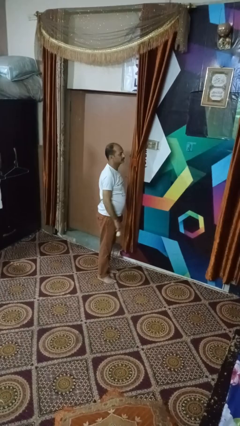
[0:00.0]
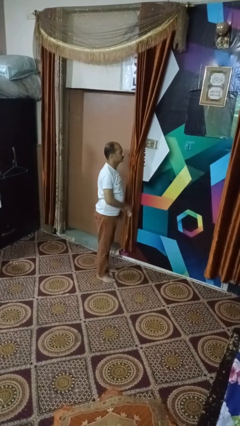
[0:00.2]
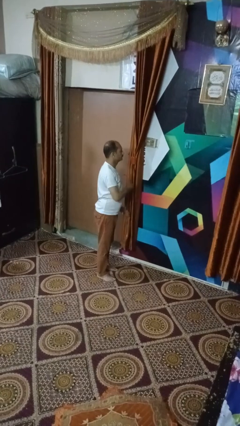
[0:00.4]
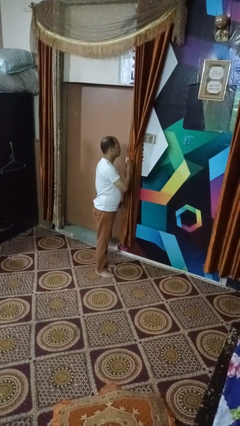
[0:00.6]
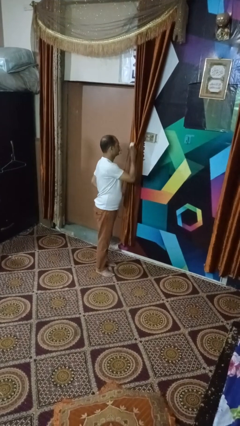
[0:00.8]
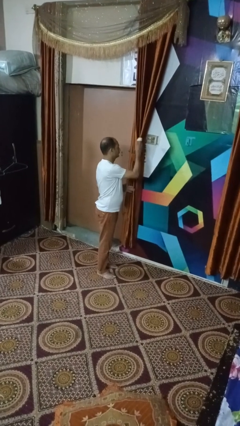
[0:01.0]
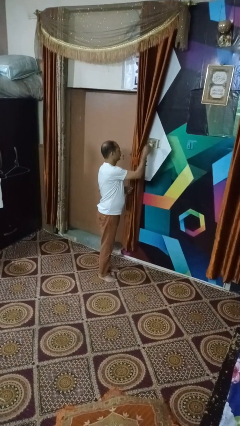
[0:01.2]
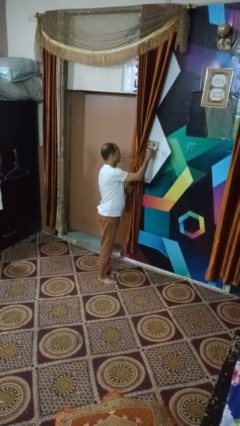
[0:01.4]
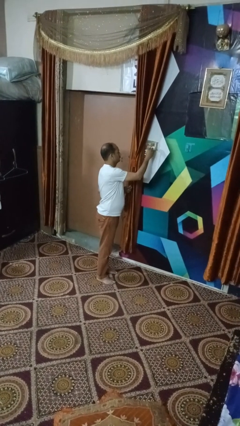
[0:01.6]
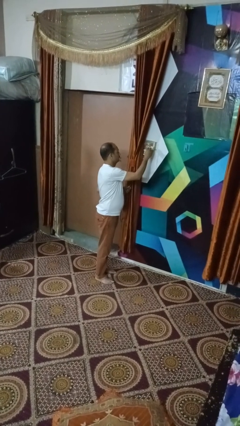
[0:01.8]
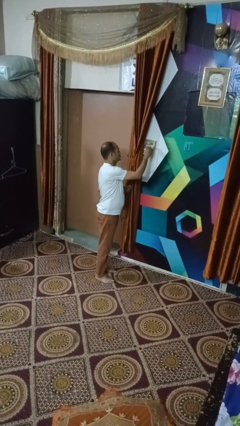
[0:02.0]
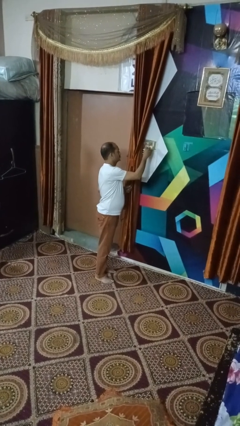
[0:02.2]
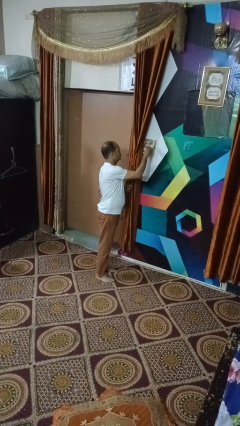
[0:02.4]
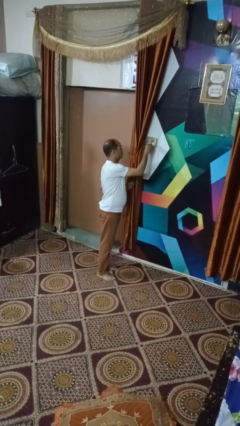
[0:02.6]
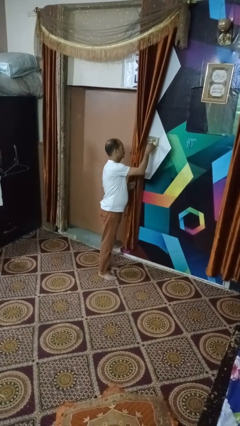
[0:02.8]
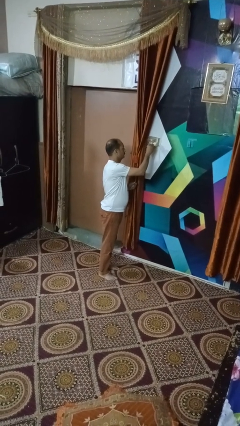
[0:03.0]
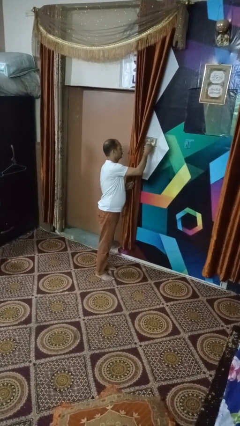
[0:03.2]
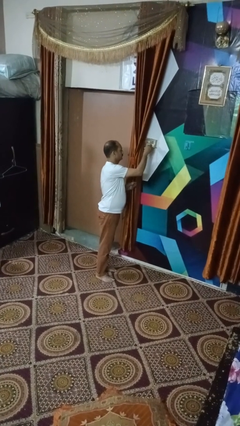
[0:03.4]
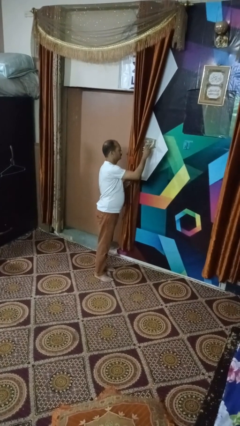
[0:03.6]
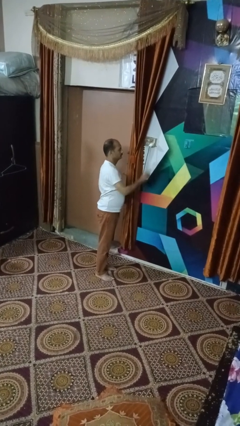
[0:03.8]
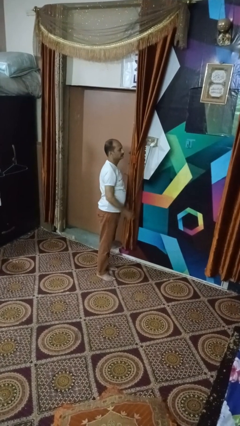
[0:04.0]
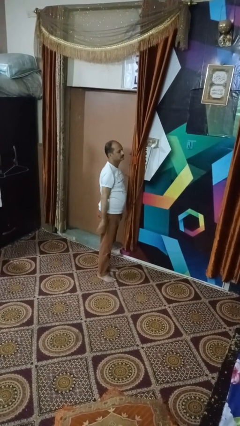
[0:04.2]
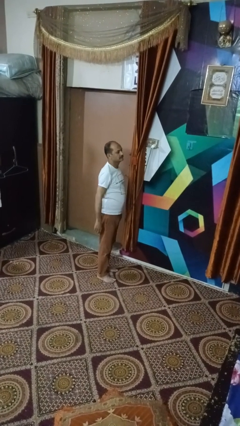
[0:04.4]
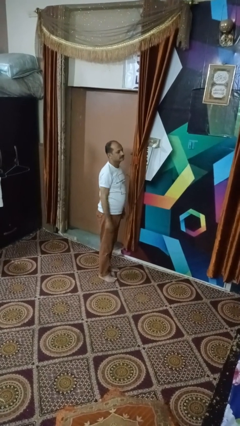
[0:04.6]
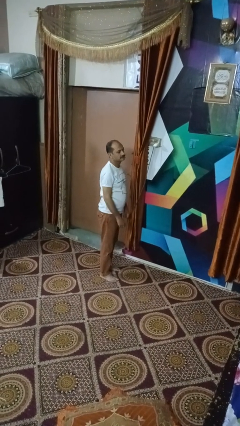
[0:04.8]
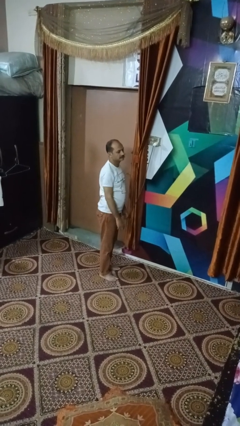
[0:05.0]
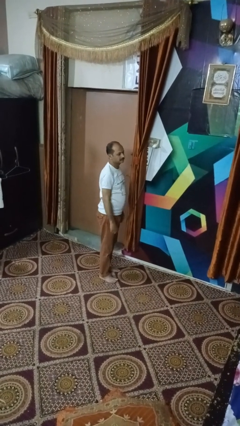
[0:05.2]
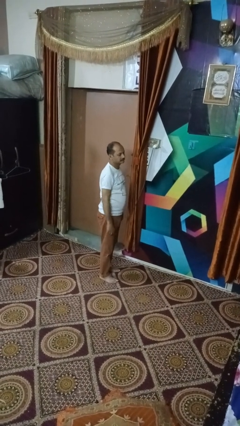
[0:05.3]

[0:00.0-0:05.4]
person plugs into electrical socket

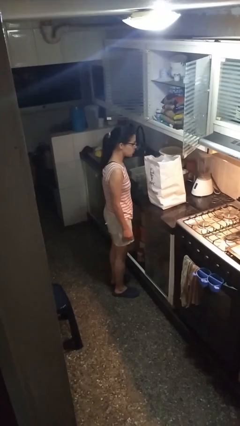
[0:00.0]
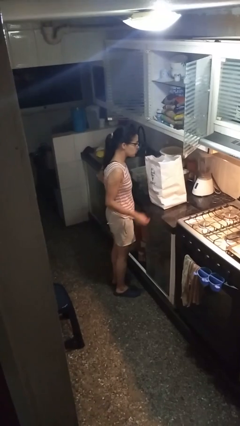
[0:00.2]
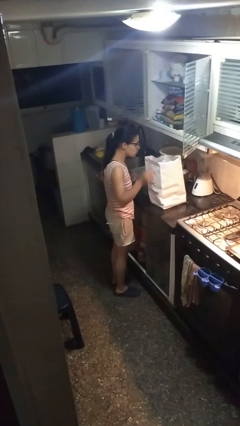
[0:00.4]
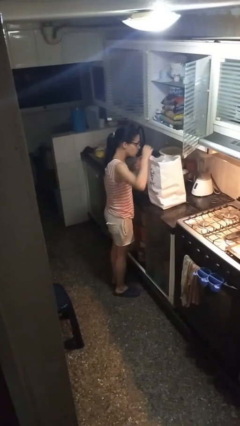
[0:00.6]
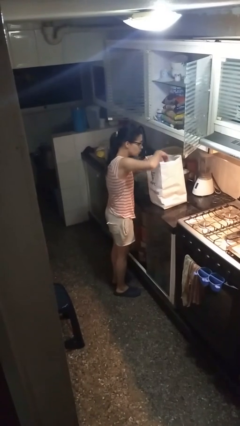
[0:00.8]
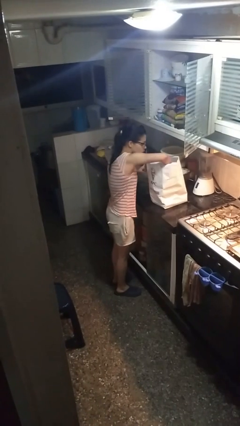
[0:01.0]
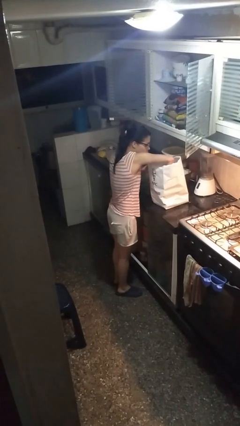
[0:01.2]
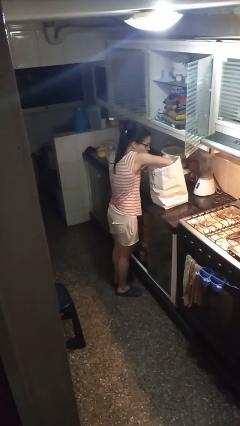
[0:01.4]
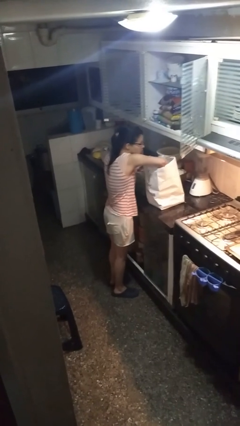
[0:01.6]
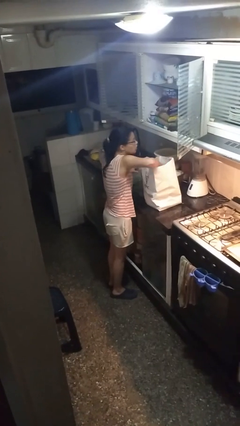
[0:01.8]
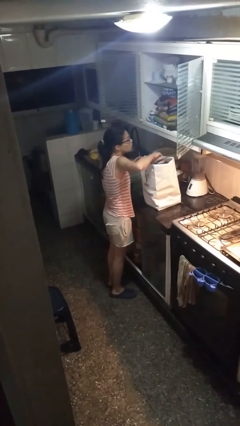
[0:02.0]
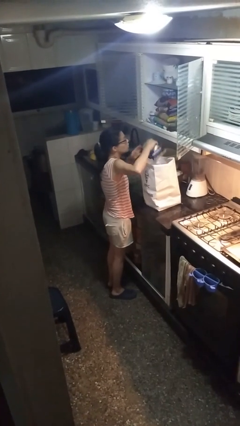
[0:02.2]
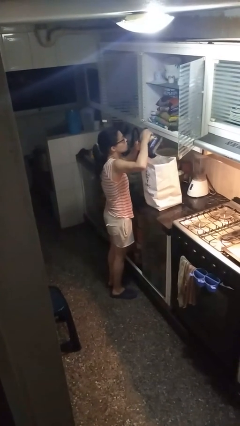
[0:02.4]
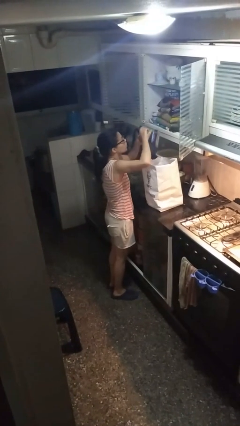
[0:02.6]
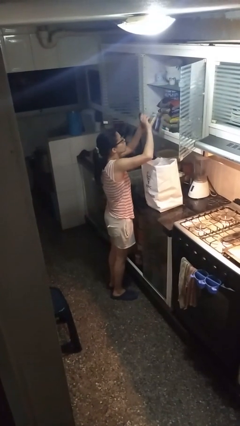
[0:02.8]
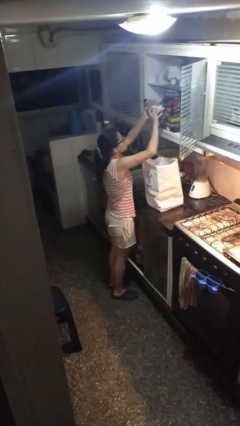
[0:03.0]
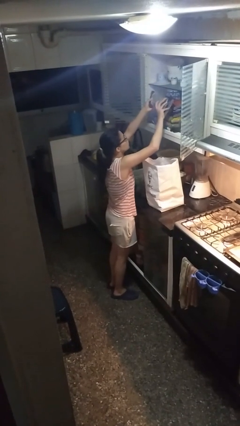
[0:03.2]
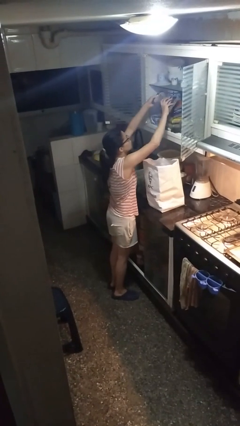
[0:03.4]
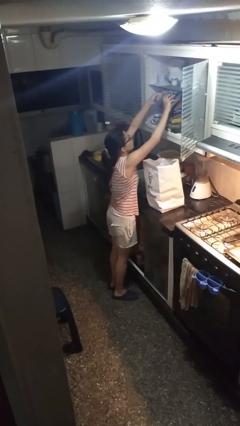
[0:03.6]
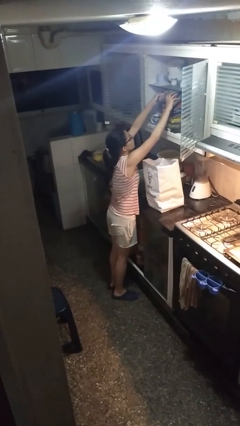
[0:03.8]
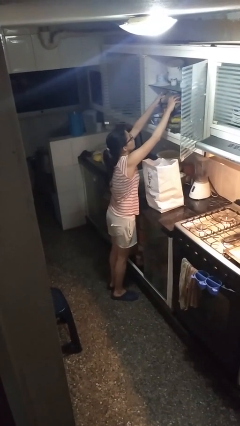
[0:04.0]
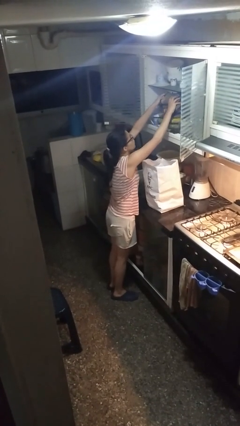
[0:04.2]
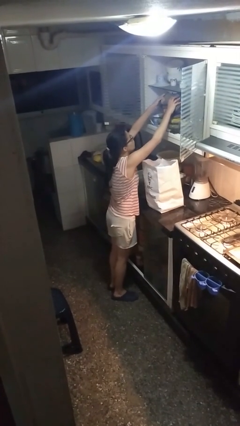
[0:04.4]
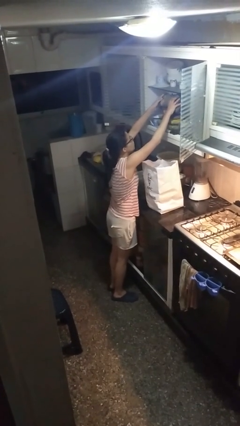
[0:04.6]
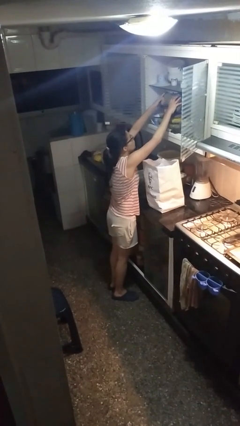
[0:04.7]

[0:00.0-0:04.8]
person loads groceries into cabinet

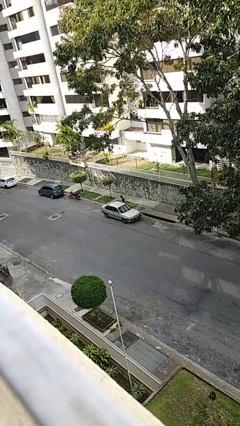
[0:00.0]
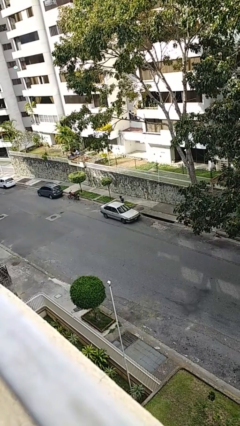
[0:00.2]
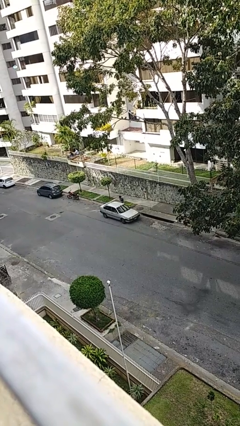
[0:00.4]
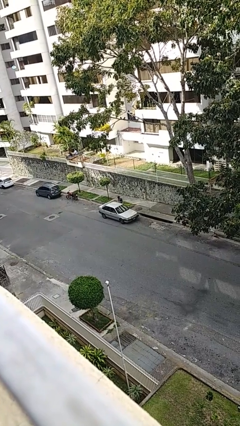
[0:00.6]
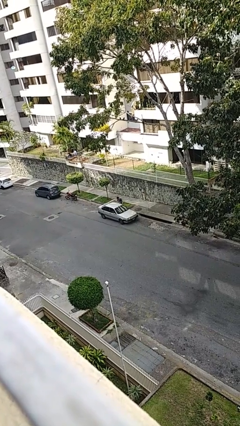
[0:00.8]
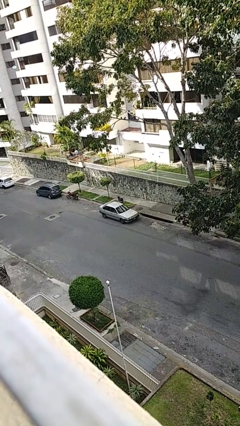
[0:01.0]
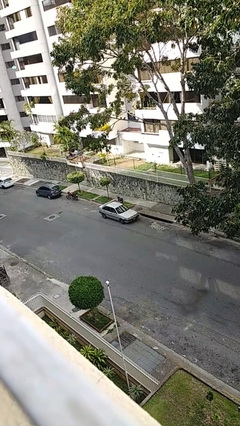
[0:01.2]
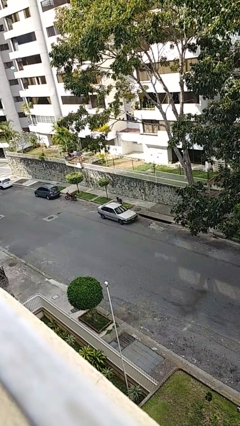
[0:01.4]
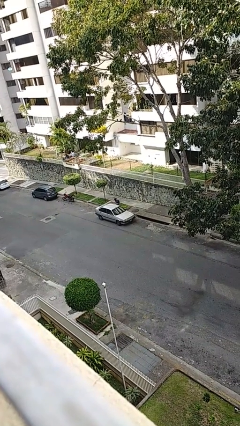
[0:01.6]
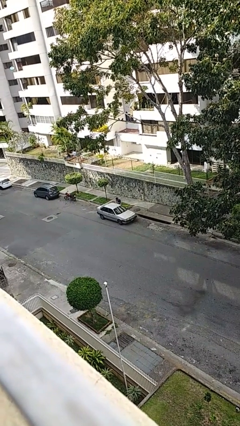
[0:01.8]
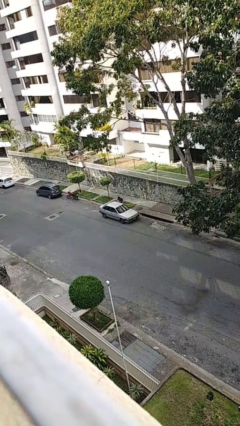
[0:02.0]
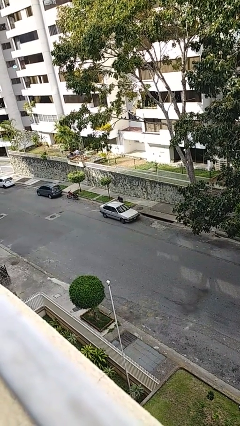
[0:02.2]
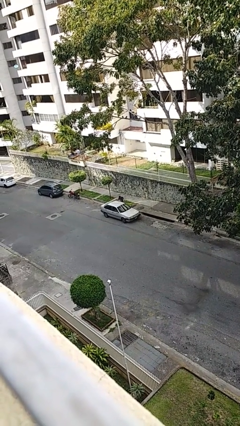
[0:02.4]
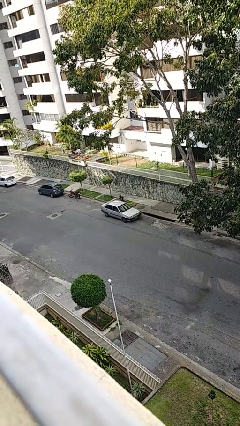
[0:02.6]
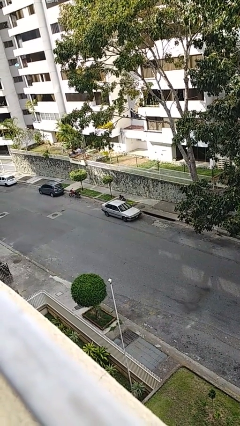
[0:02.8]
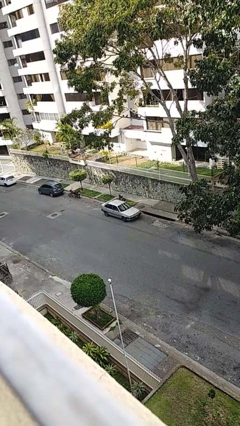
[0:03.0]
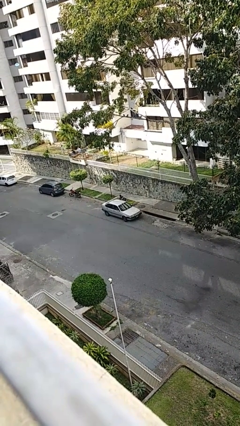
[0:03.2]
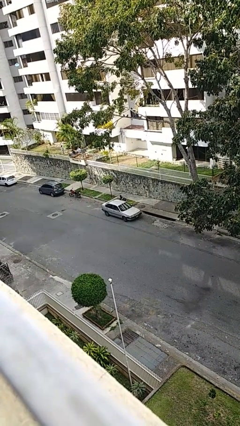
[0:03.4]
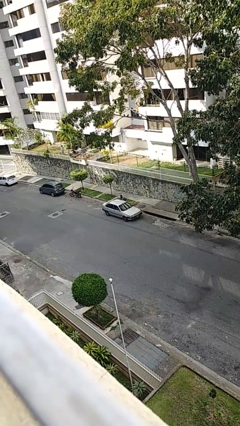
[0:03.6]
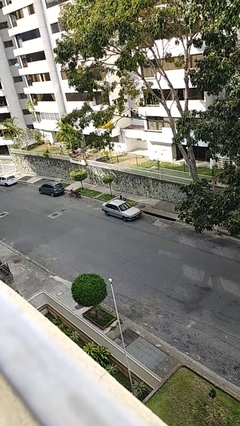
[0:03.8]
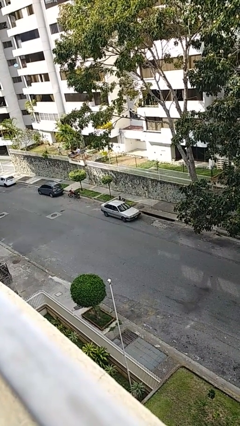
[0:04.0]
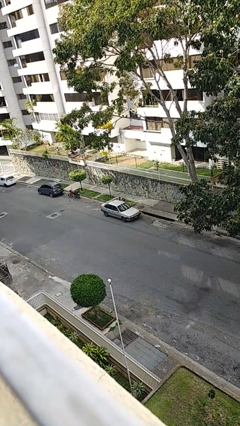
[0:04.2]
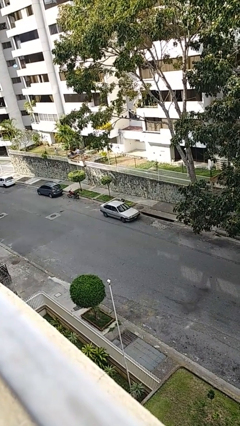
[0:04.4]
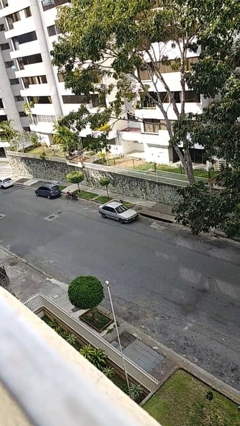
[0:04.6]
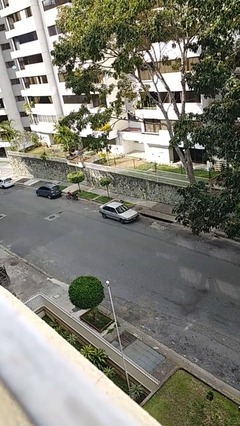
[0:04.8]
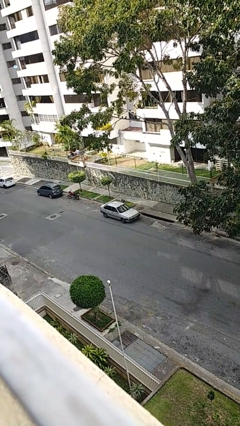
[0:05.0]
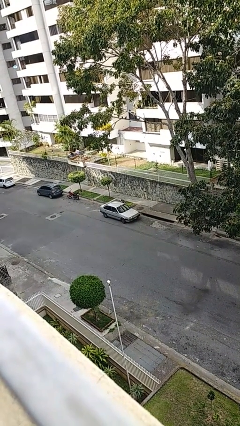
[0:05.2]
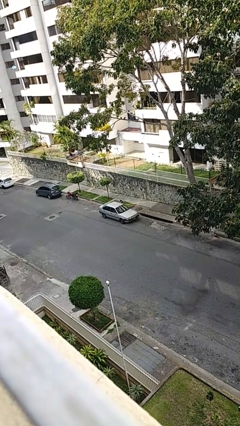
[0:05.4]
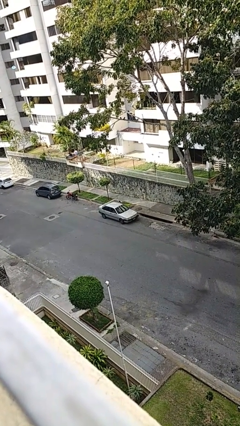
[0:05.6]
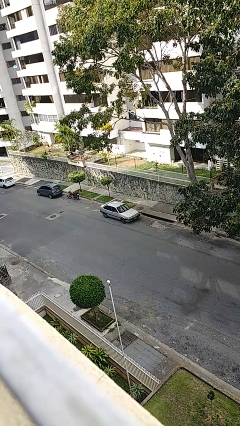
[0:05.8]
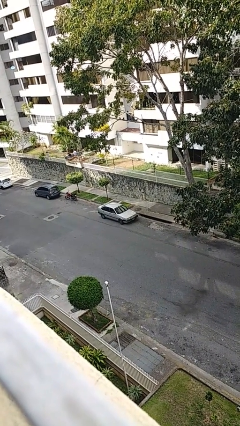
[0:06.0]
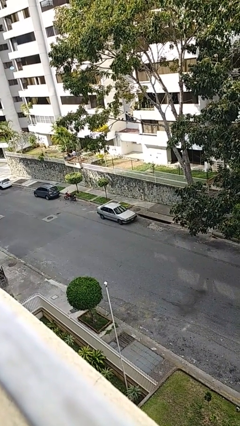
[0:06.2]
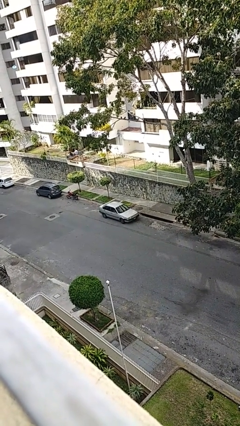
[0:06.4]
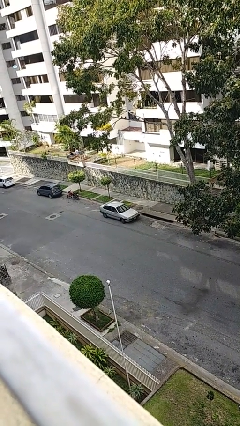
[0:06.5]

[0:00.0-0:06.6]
car picks up person

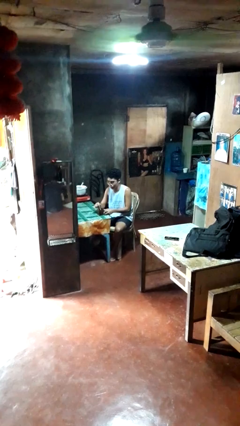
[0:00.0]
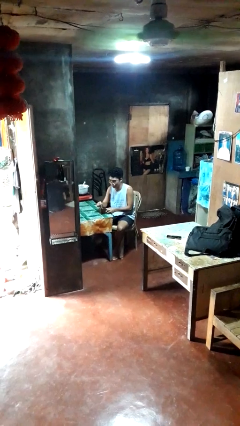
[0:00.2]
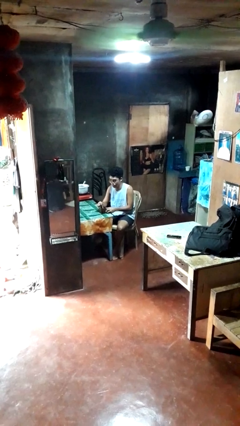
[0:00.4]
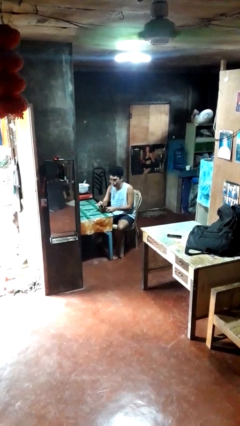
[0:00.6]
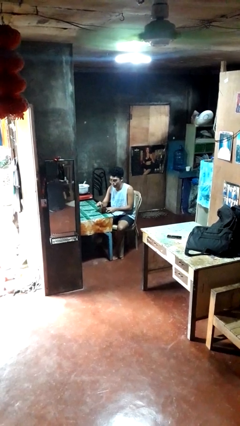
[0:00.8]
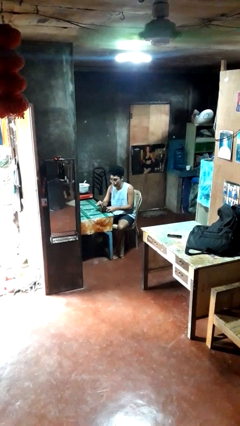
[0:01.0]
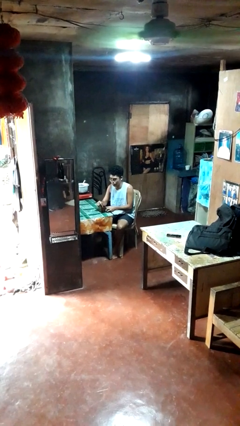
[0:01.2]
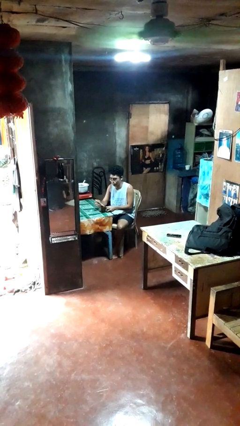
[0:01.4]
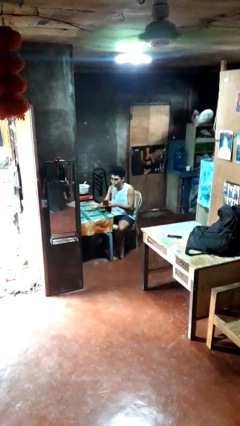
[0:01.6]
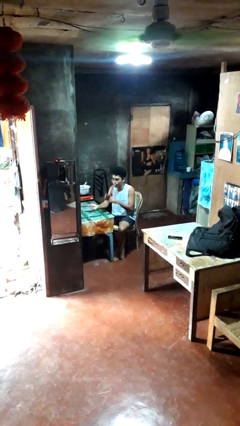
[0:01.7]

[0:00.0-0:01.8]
person stirs mug
